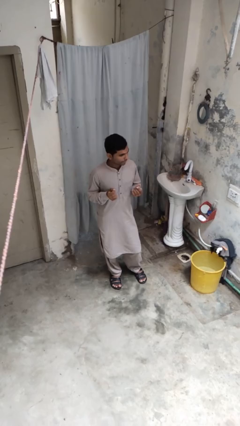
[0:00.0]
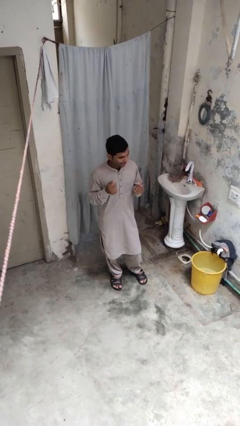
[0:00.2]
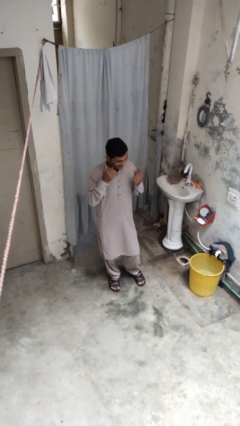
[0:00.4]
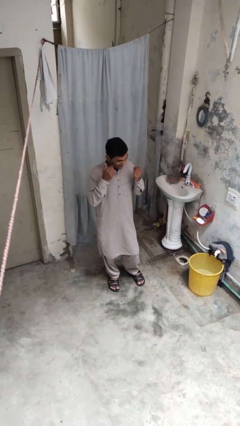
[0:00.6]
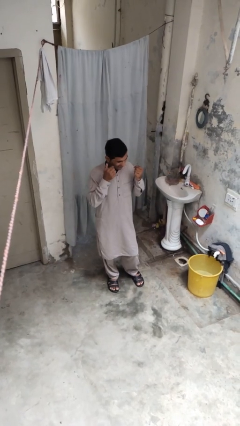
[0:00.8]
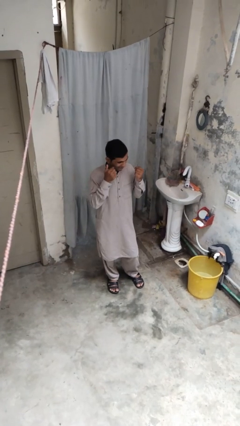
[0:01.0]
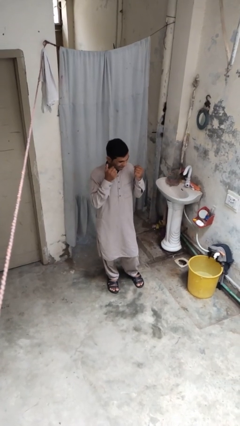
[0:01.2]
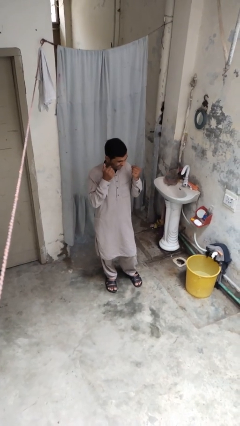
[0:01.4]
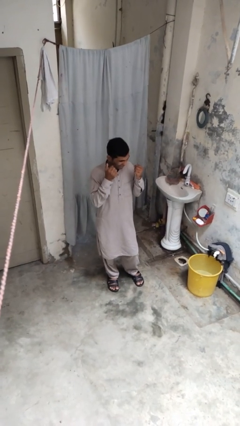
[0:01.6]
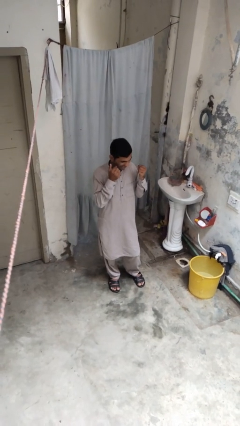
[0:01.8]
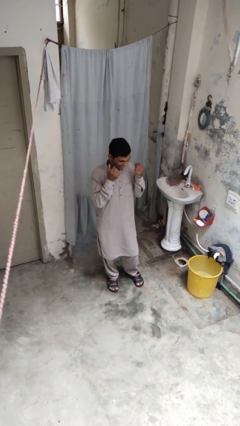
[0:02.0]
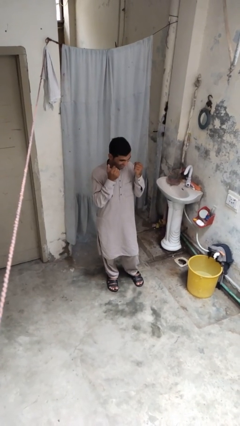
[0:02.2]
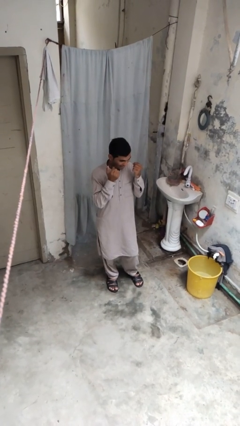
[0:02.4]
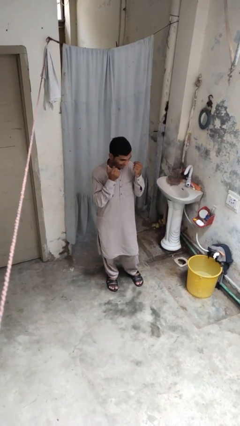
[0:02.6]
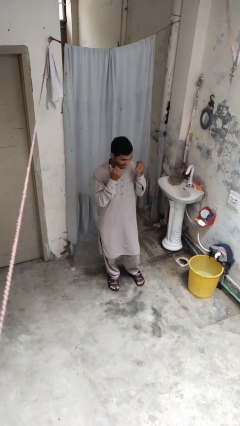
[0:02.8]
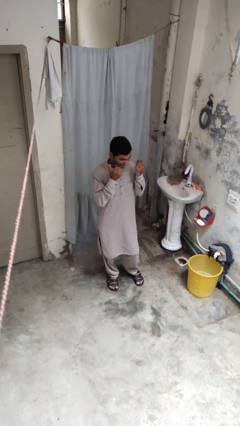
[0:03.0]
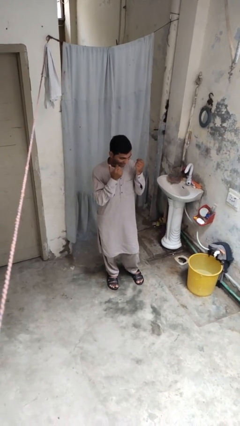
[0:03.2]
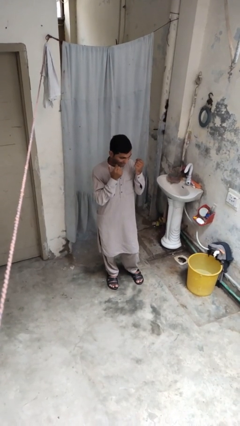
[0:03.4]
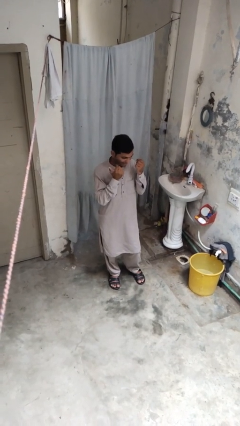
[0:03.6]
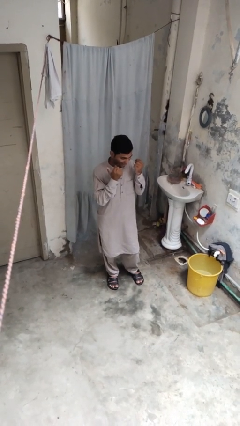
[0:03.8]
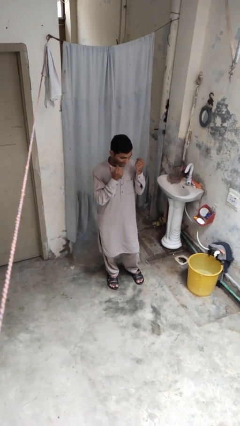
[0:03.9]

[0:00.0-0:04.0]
person flosses

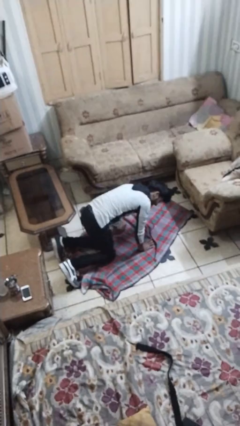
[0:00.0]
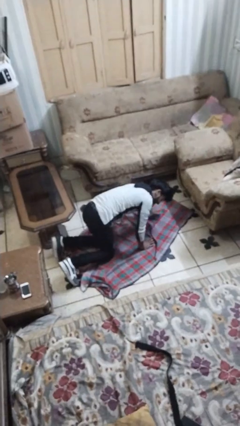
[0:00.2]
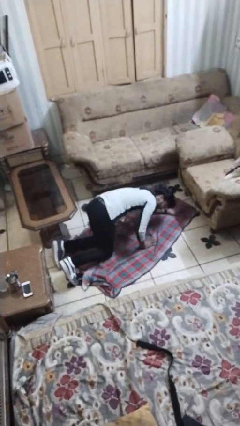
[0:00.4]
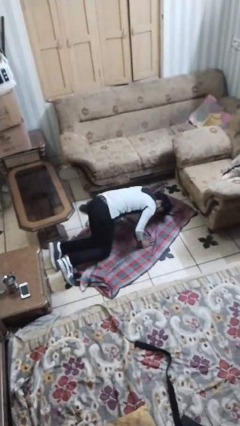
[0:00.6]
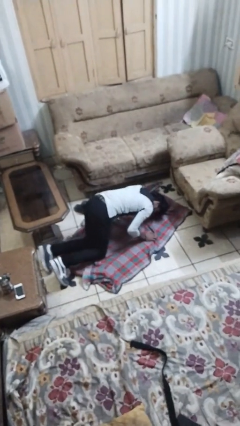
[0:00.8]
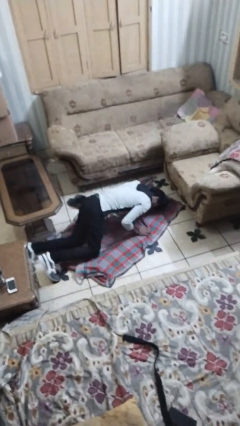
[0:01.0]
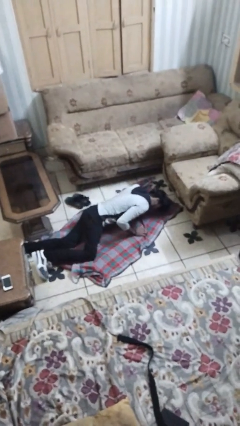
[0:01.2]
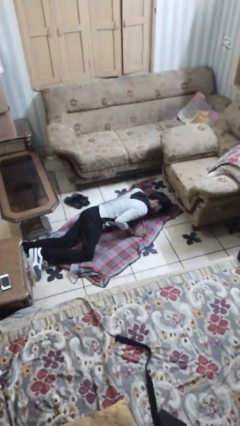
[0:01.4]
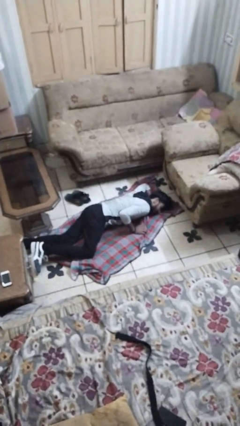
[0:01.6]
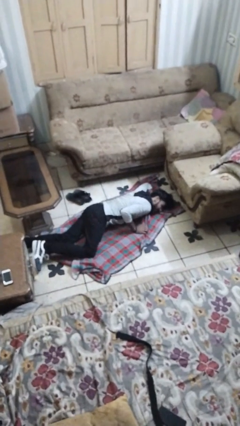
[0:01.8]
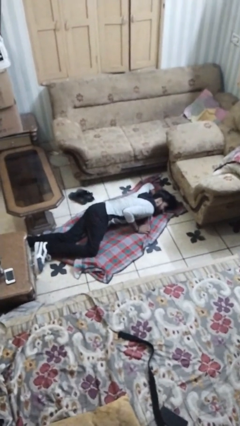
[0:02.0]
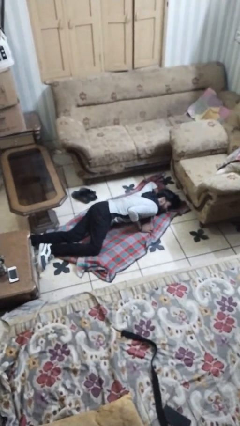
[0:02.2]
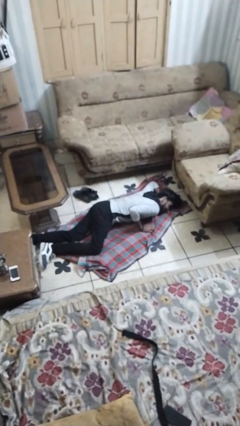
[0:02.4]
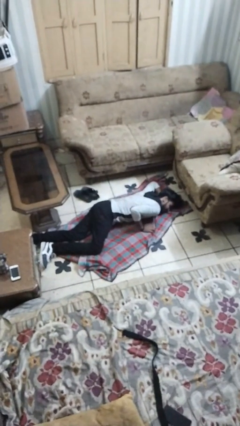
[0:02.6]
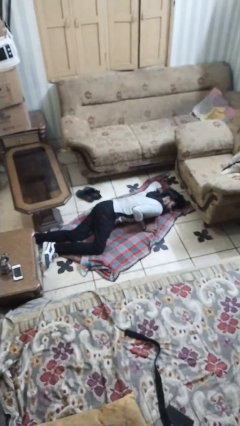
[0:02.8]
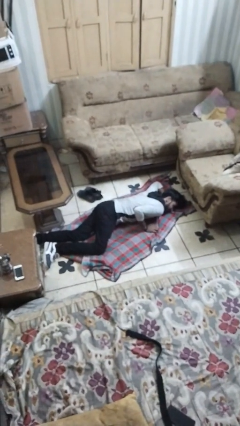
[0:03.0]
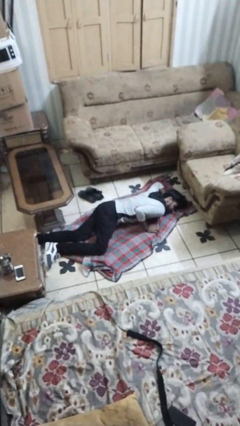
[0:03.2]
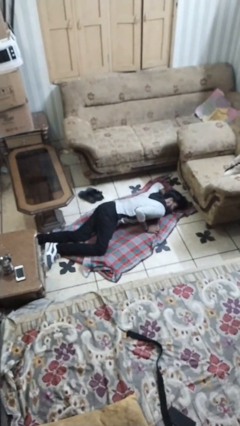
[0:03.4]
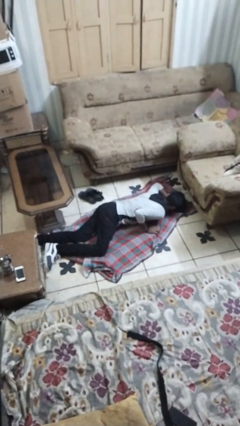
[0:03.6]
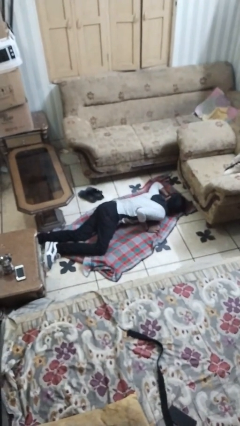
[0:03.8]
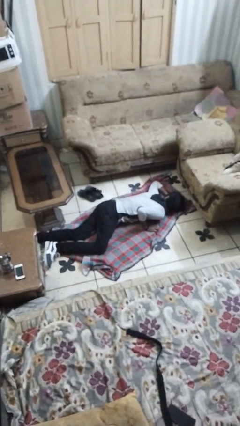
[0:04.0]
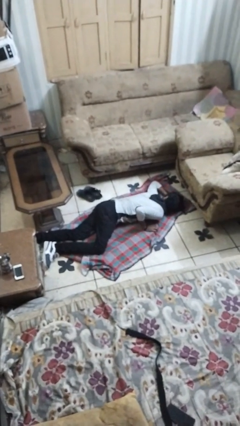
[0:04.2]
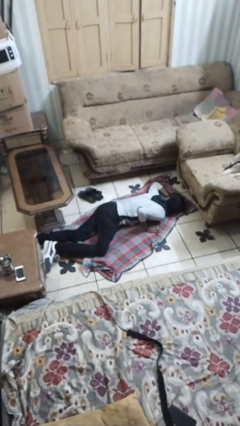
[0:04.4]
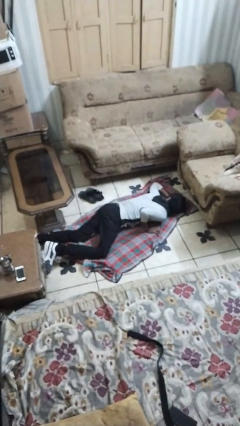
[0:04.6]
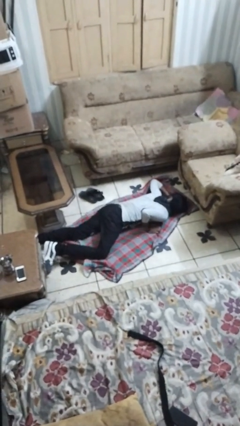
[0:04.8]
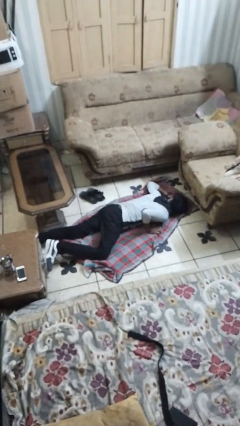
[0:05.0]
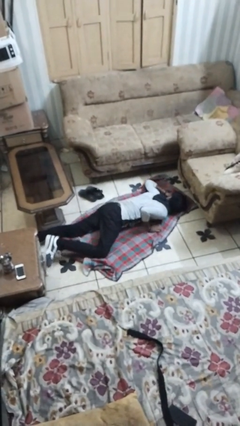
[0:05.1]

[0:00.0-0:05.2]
person lies down on floor

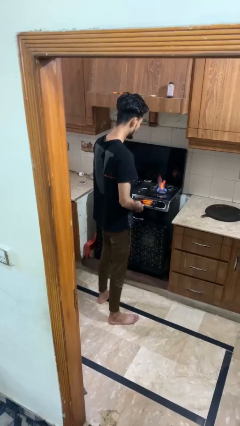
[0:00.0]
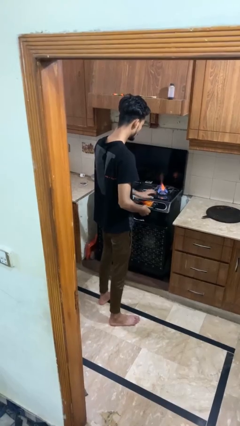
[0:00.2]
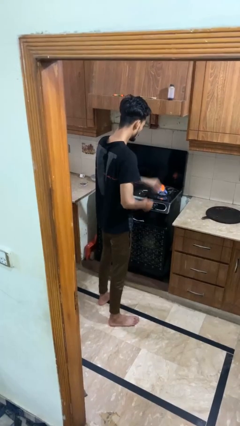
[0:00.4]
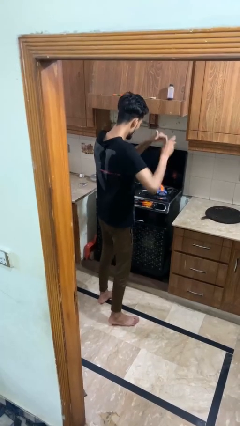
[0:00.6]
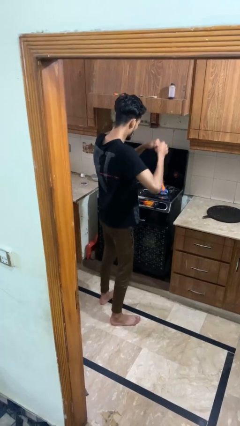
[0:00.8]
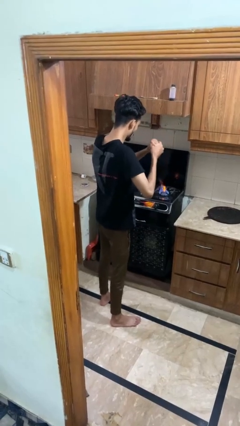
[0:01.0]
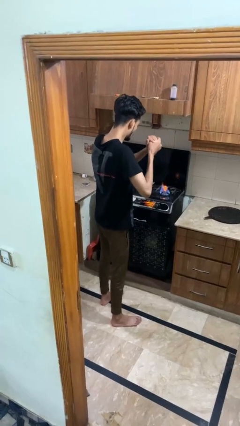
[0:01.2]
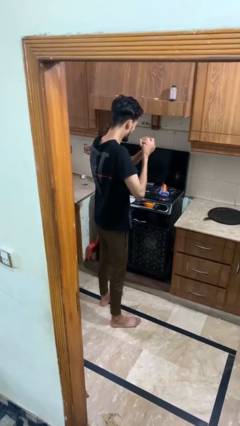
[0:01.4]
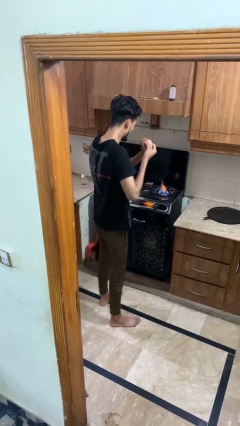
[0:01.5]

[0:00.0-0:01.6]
person burns hand

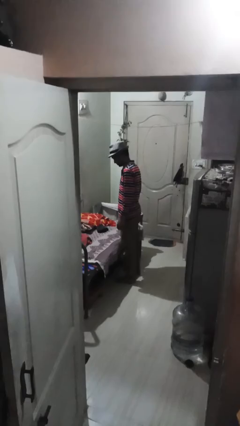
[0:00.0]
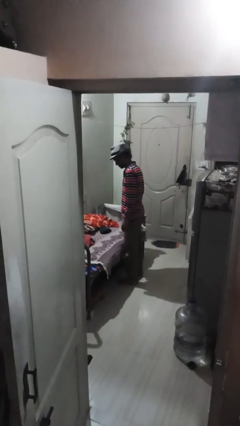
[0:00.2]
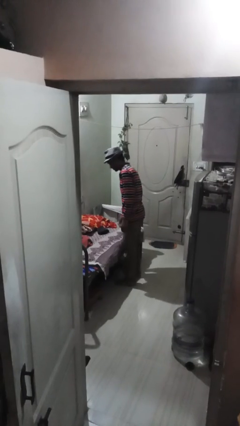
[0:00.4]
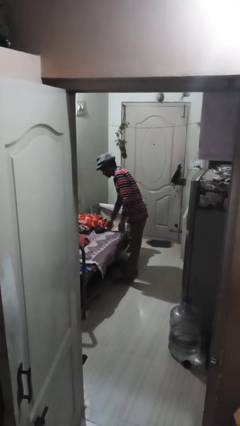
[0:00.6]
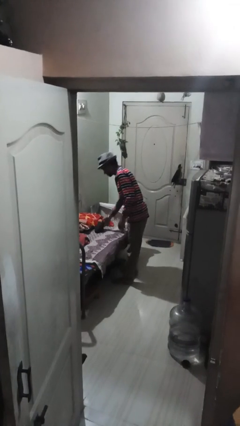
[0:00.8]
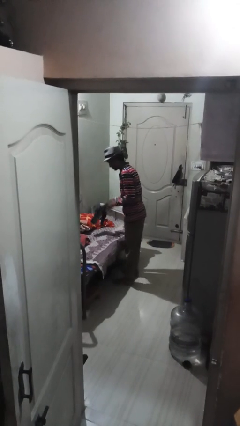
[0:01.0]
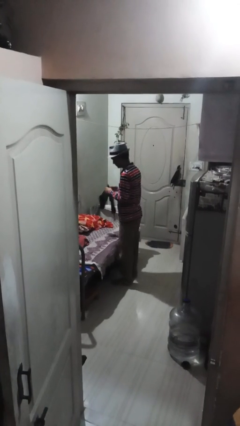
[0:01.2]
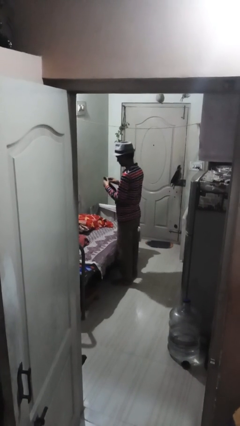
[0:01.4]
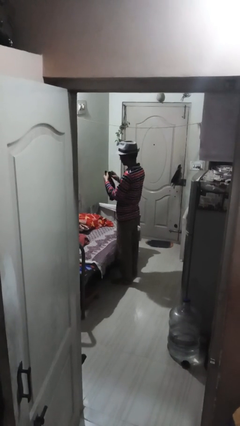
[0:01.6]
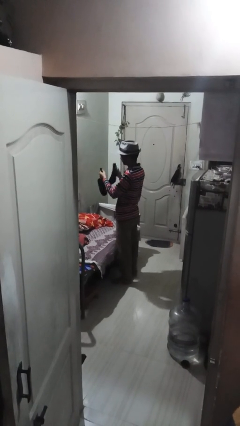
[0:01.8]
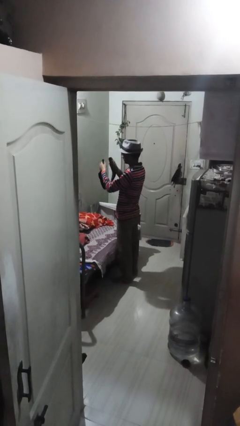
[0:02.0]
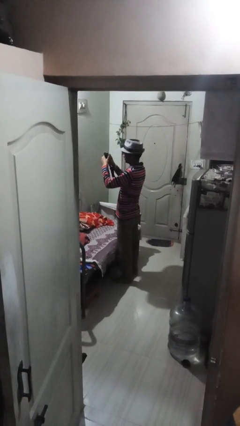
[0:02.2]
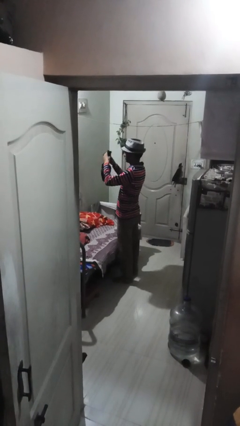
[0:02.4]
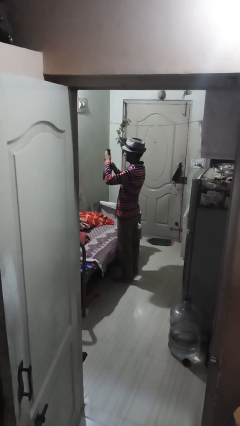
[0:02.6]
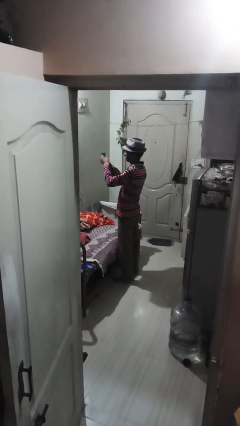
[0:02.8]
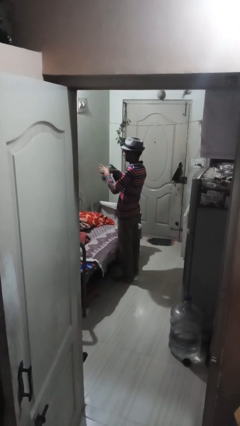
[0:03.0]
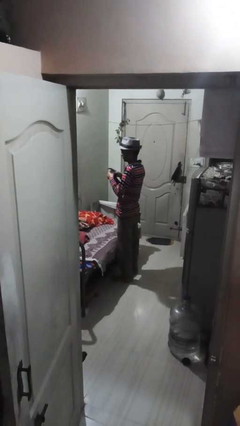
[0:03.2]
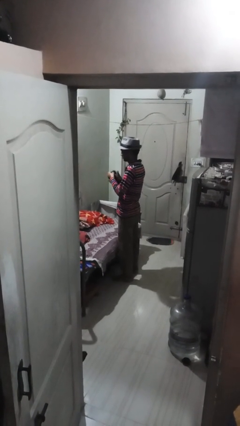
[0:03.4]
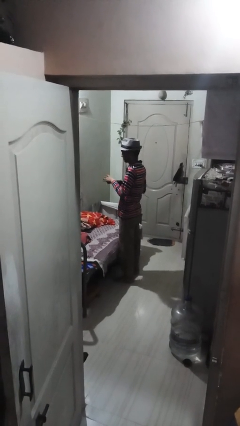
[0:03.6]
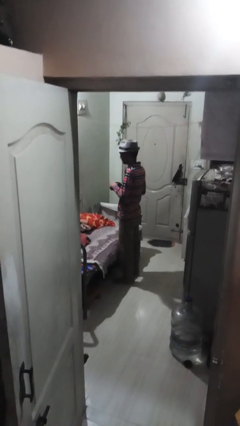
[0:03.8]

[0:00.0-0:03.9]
person folds socks

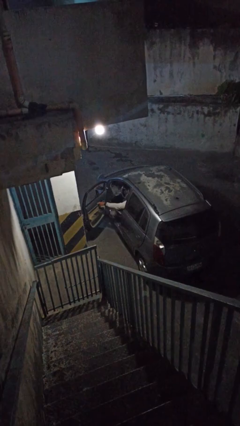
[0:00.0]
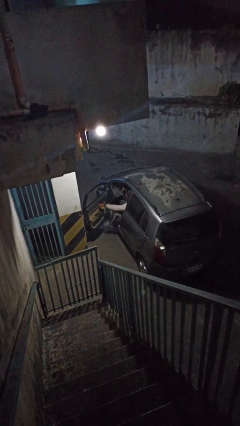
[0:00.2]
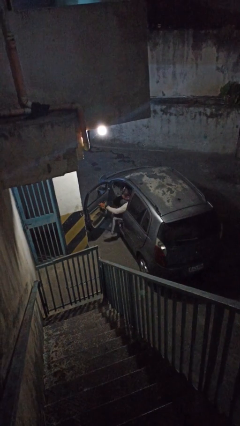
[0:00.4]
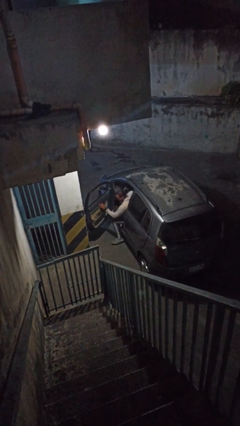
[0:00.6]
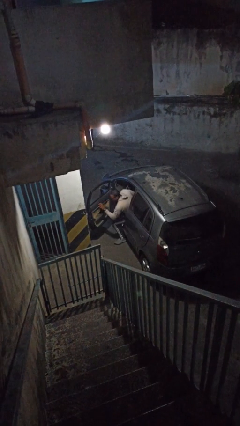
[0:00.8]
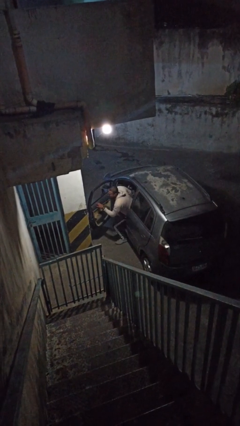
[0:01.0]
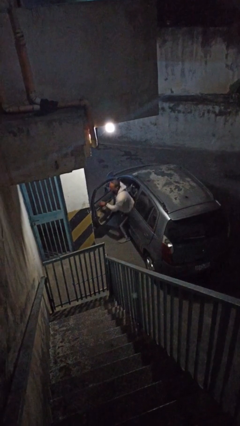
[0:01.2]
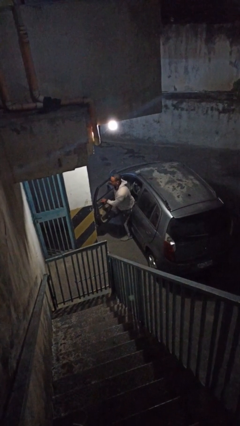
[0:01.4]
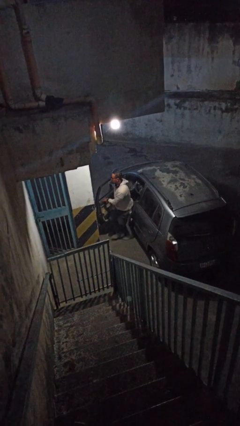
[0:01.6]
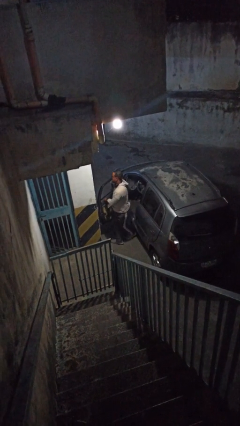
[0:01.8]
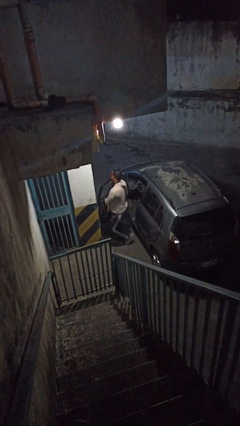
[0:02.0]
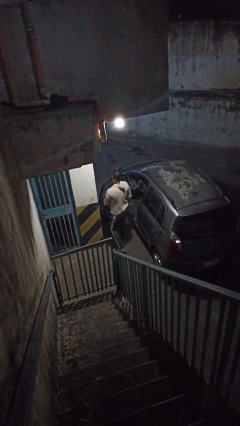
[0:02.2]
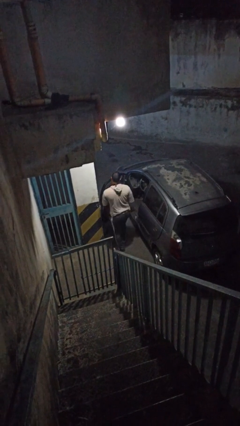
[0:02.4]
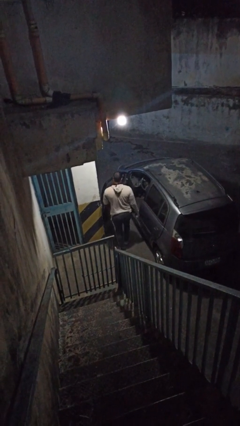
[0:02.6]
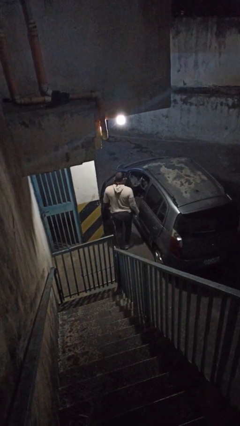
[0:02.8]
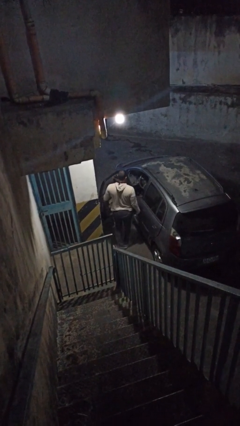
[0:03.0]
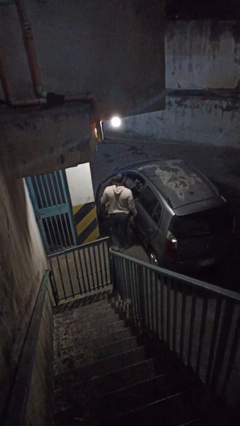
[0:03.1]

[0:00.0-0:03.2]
person exits car
